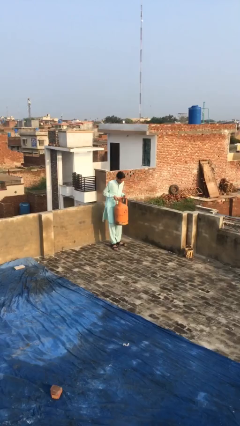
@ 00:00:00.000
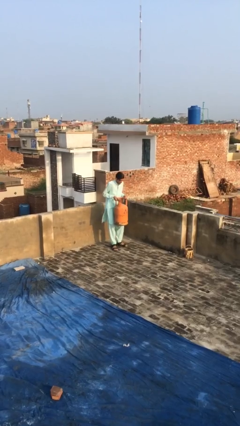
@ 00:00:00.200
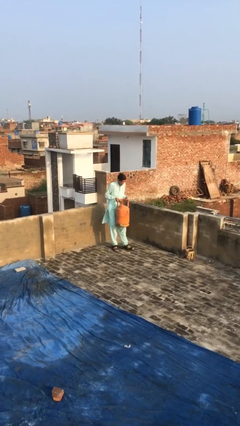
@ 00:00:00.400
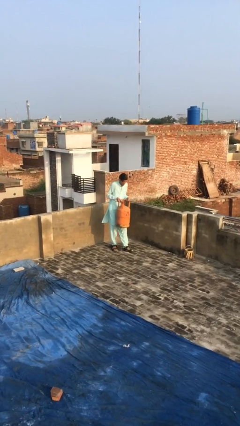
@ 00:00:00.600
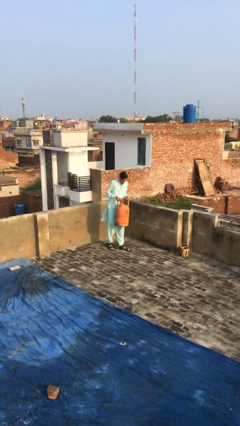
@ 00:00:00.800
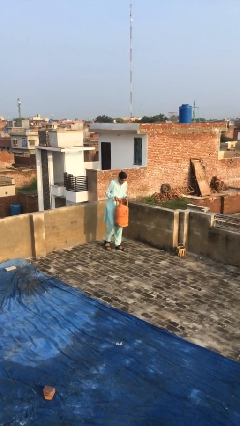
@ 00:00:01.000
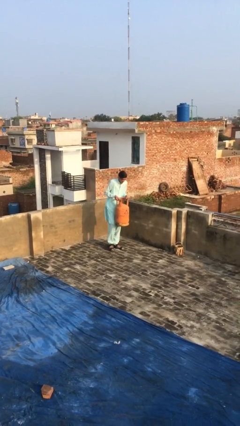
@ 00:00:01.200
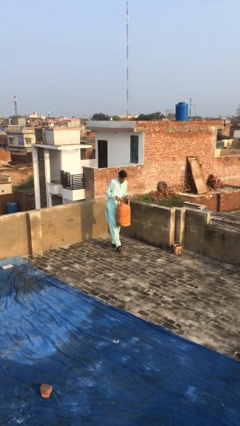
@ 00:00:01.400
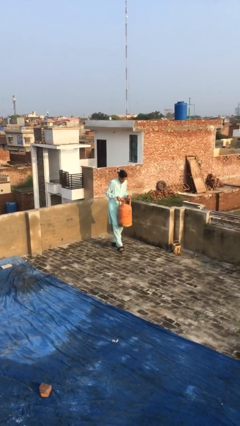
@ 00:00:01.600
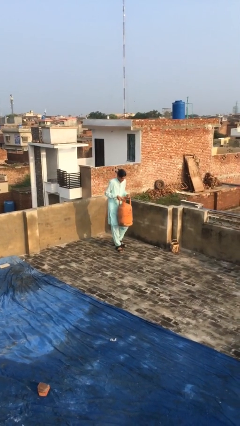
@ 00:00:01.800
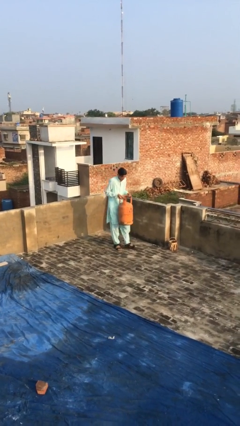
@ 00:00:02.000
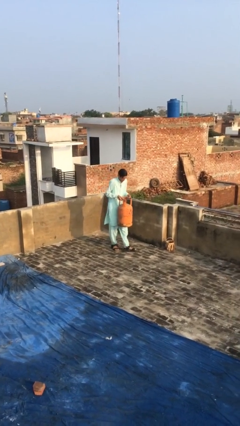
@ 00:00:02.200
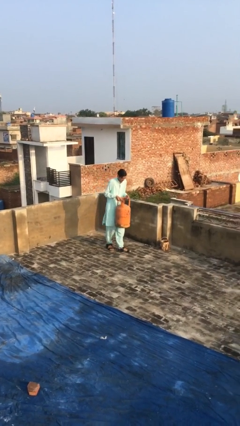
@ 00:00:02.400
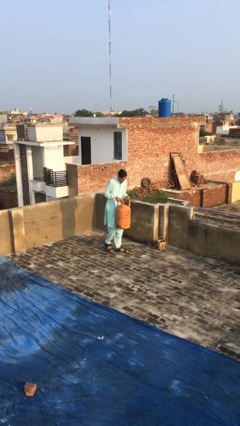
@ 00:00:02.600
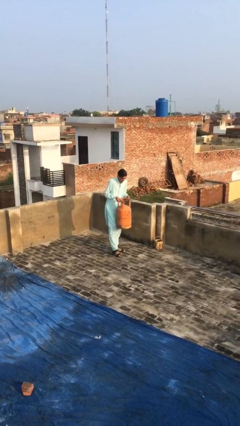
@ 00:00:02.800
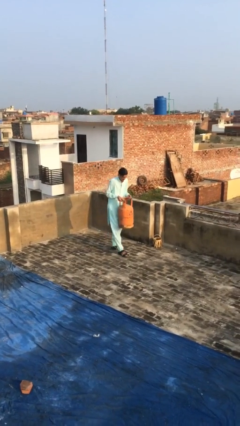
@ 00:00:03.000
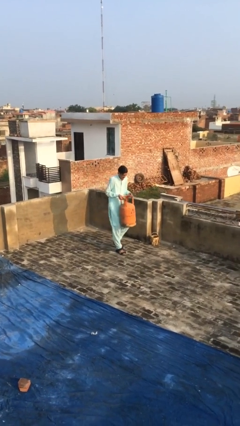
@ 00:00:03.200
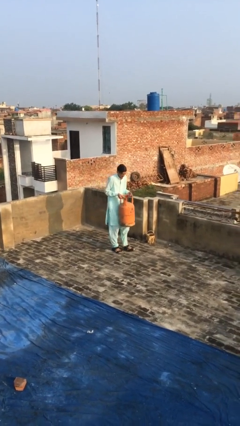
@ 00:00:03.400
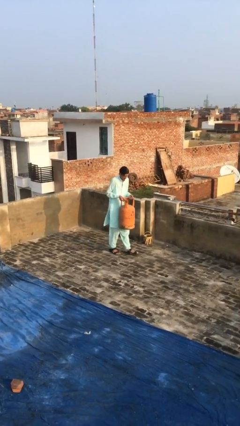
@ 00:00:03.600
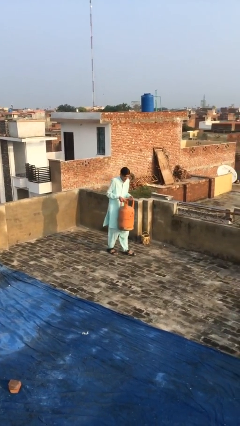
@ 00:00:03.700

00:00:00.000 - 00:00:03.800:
person carries heavy object

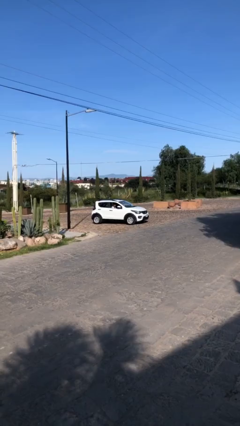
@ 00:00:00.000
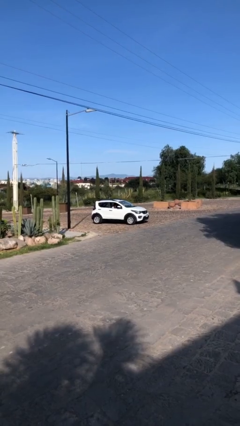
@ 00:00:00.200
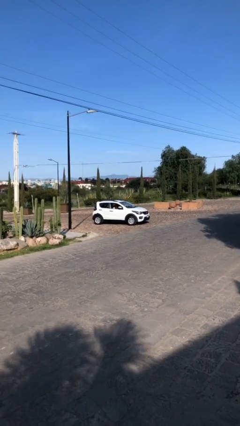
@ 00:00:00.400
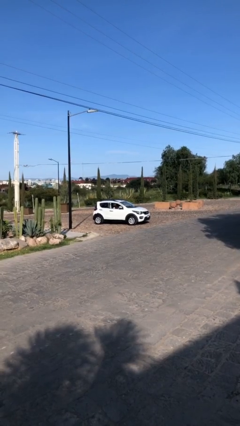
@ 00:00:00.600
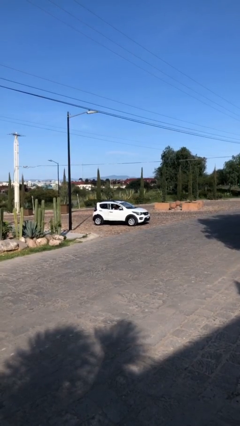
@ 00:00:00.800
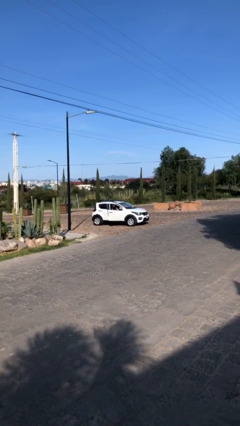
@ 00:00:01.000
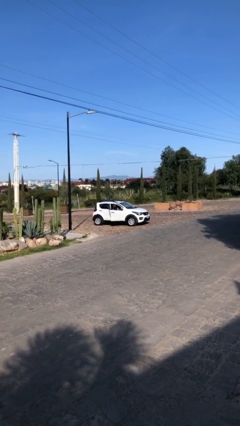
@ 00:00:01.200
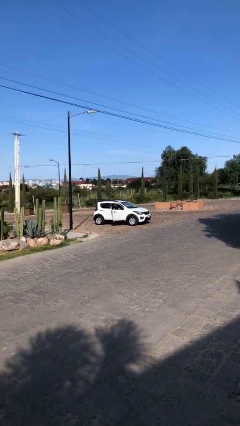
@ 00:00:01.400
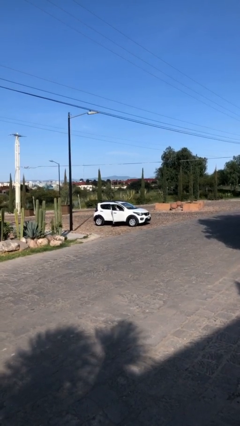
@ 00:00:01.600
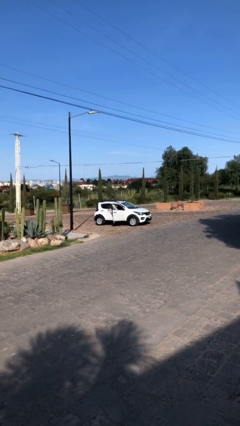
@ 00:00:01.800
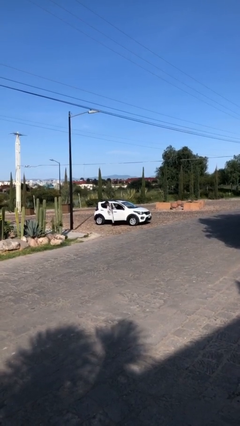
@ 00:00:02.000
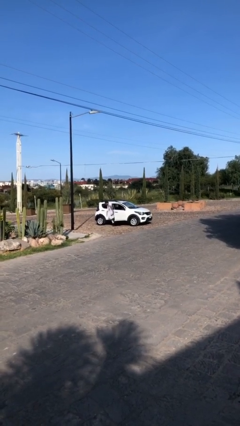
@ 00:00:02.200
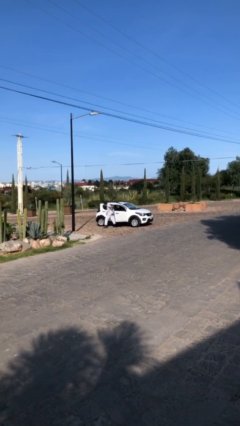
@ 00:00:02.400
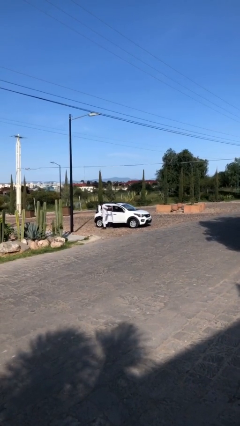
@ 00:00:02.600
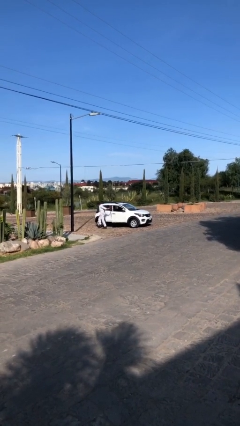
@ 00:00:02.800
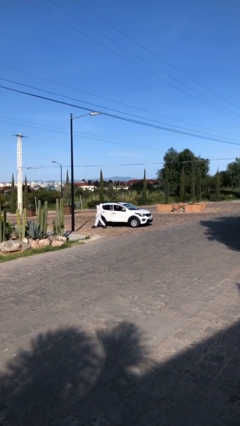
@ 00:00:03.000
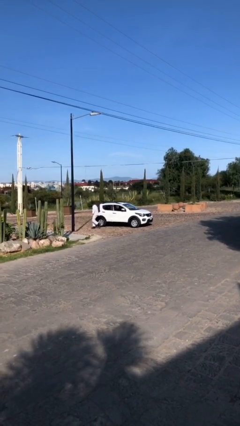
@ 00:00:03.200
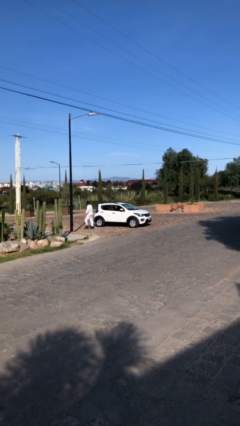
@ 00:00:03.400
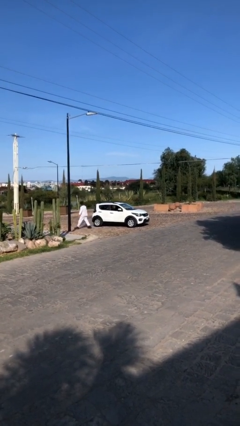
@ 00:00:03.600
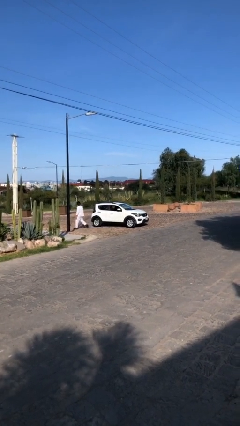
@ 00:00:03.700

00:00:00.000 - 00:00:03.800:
car drops off person

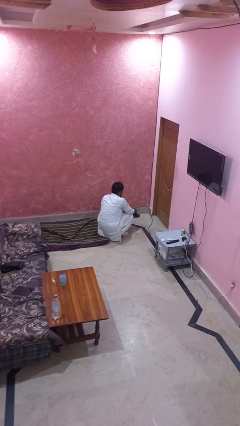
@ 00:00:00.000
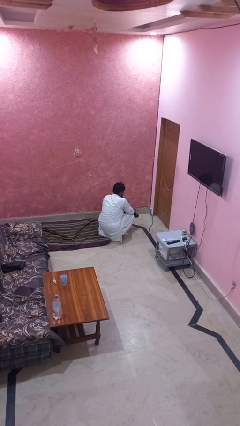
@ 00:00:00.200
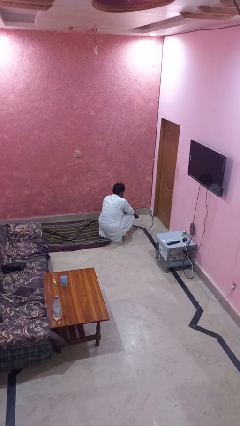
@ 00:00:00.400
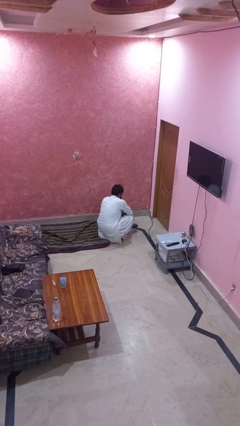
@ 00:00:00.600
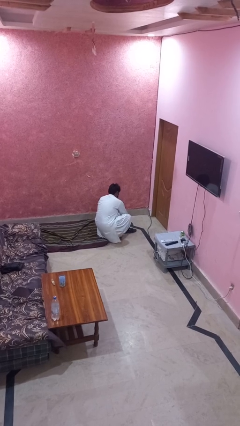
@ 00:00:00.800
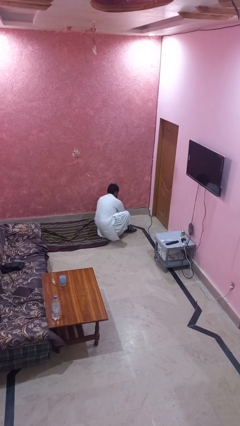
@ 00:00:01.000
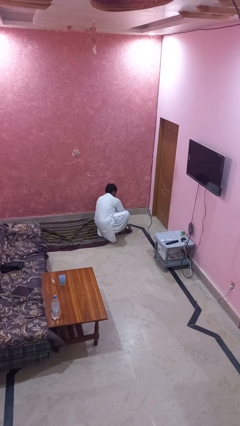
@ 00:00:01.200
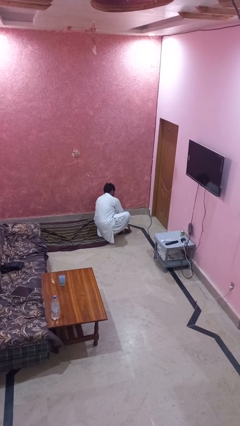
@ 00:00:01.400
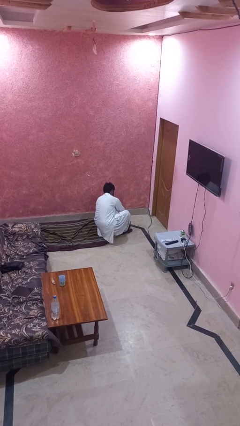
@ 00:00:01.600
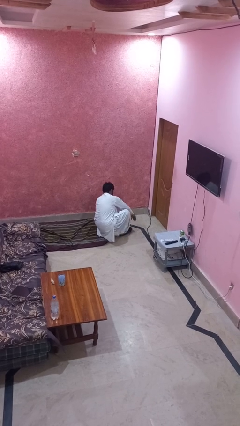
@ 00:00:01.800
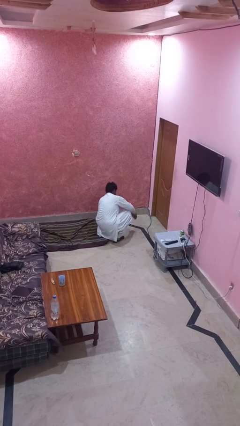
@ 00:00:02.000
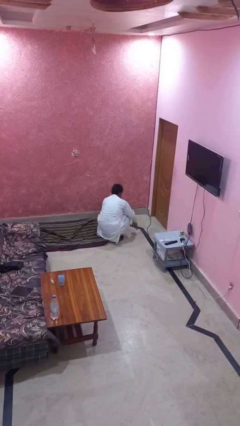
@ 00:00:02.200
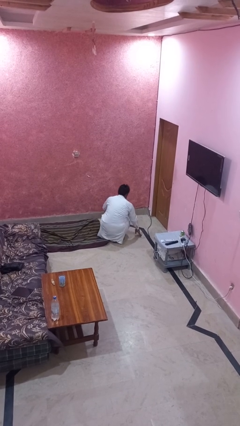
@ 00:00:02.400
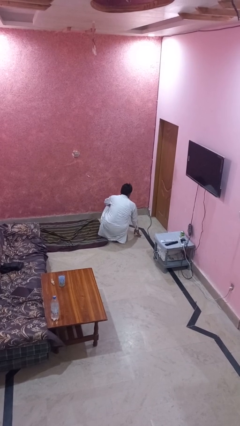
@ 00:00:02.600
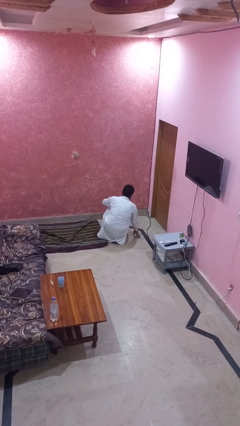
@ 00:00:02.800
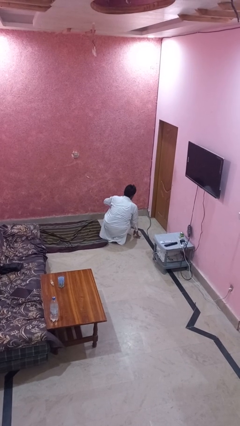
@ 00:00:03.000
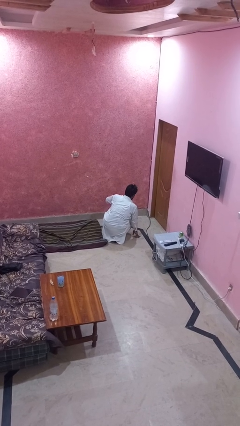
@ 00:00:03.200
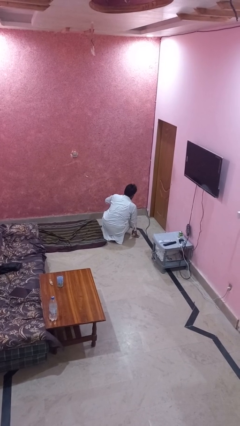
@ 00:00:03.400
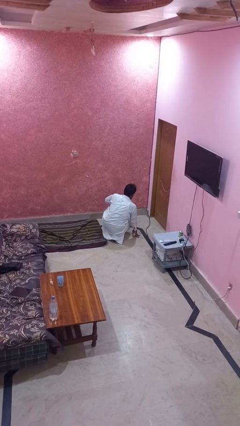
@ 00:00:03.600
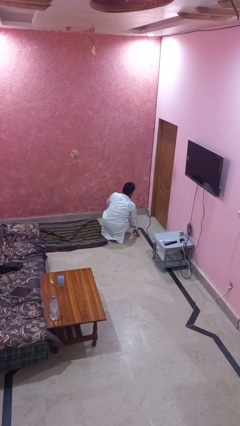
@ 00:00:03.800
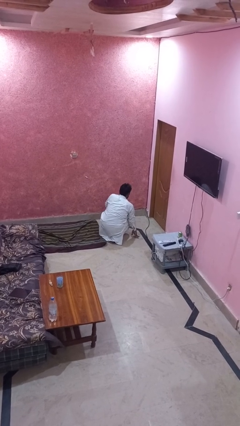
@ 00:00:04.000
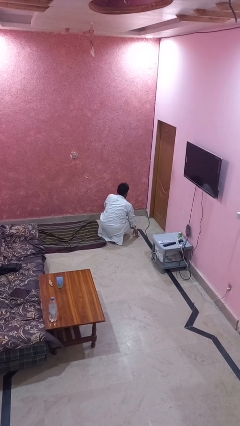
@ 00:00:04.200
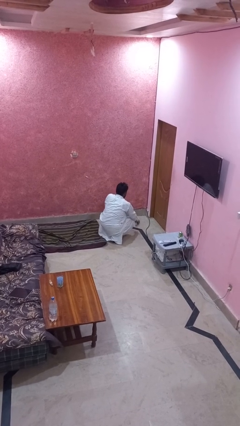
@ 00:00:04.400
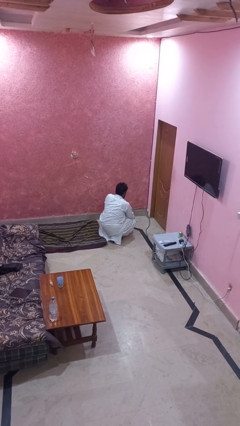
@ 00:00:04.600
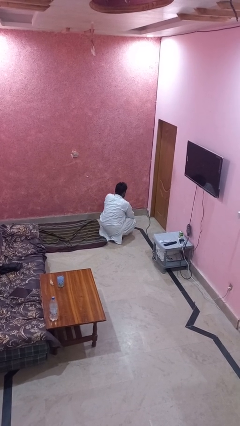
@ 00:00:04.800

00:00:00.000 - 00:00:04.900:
person puts on shoes

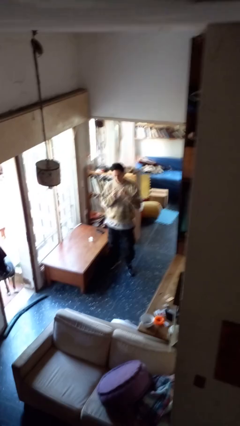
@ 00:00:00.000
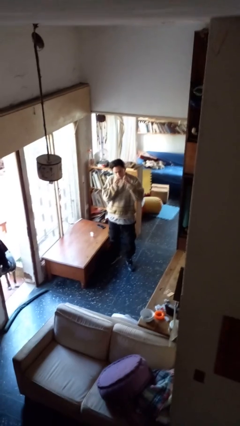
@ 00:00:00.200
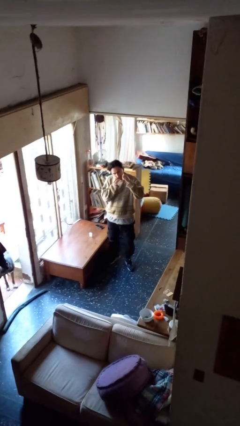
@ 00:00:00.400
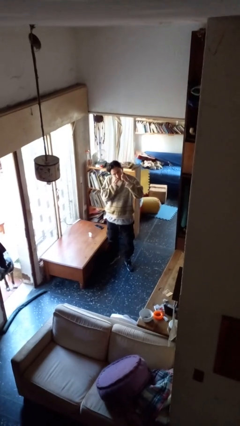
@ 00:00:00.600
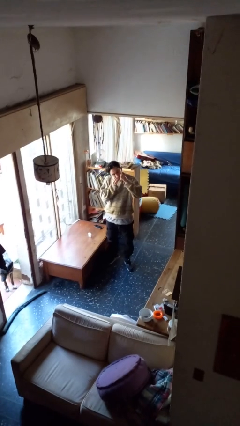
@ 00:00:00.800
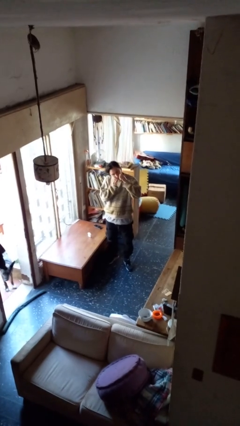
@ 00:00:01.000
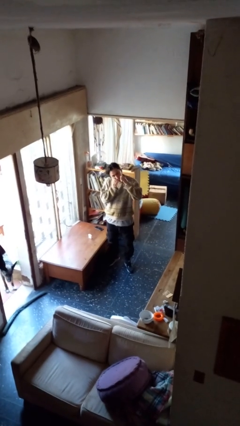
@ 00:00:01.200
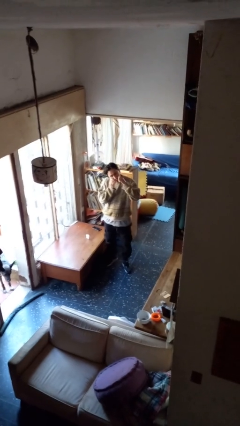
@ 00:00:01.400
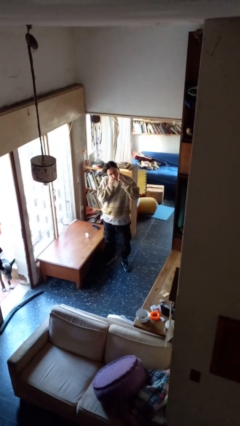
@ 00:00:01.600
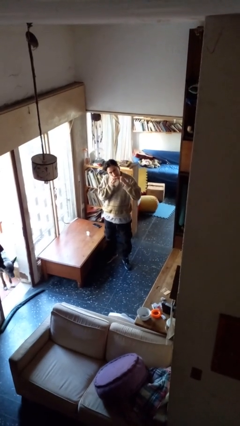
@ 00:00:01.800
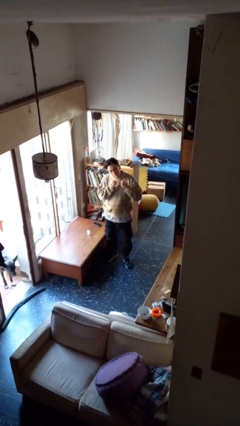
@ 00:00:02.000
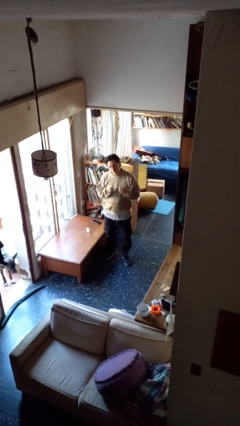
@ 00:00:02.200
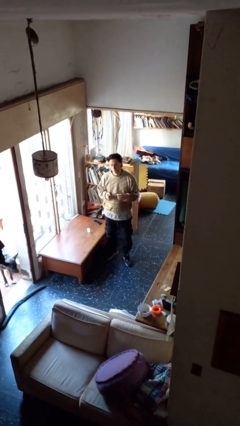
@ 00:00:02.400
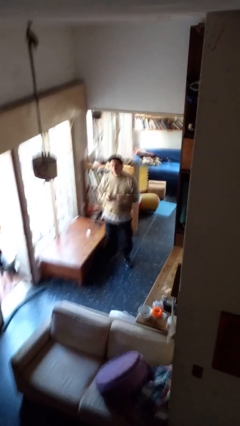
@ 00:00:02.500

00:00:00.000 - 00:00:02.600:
person flosses

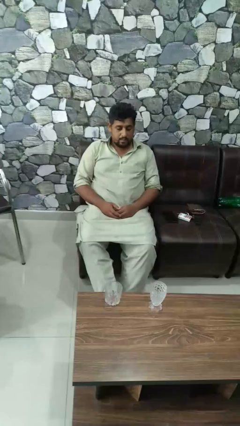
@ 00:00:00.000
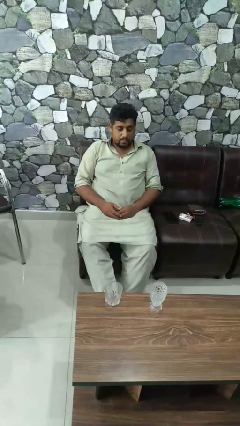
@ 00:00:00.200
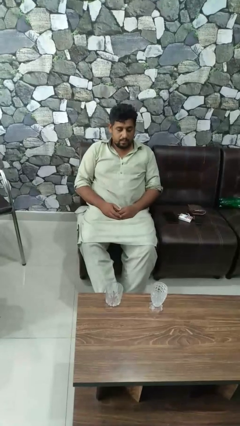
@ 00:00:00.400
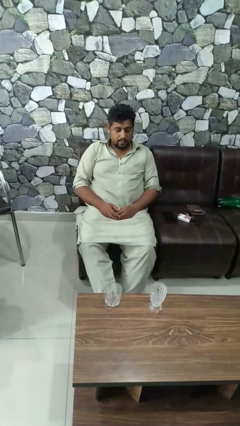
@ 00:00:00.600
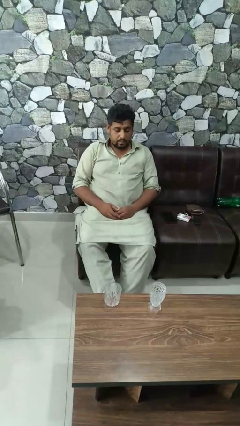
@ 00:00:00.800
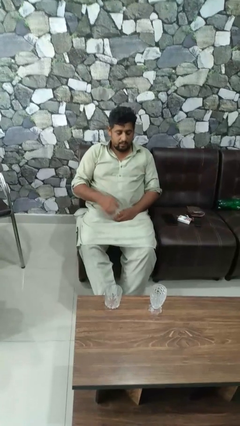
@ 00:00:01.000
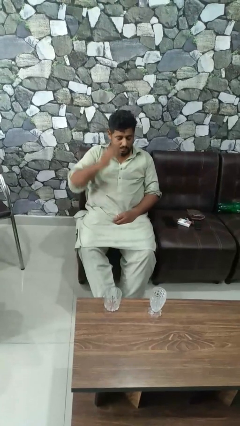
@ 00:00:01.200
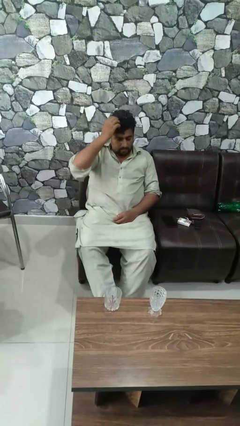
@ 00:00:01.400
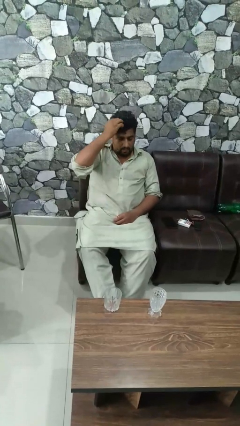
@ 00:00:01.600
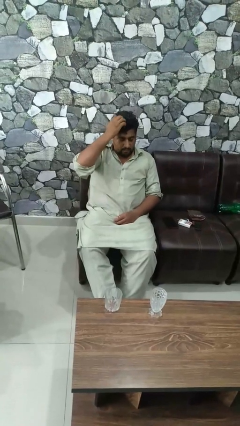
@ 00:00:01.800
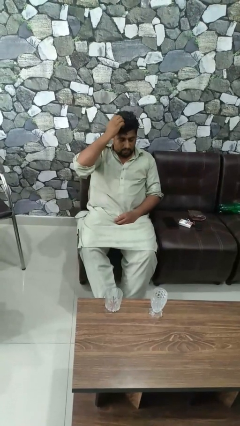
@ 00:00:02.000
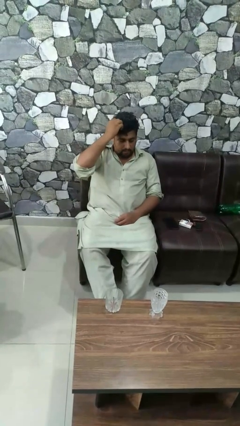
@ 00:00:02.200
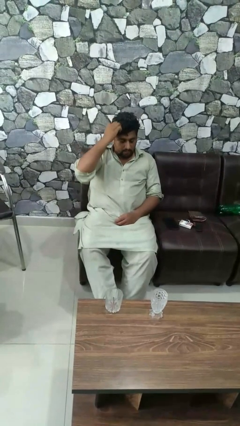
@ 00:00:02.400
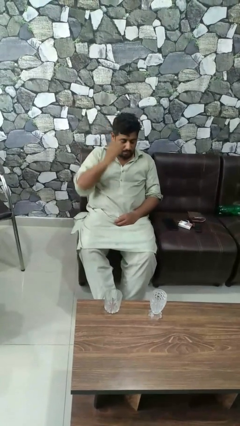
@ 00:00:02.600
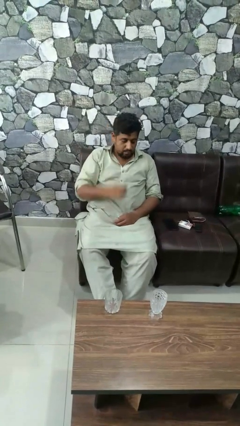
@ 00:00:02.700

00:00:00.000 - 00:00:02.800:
person scratches face
